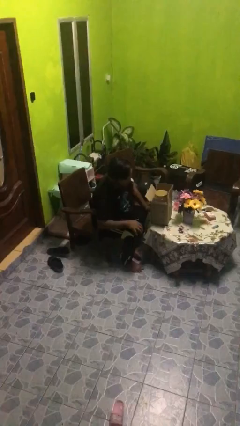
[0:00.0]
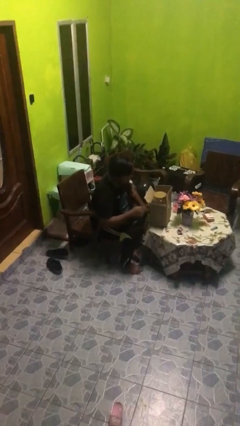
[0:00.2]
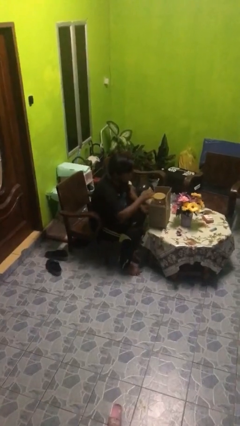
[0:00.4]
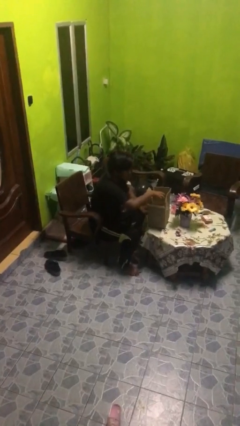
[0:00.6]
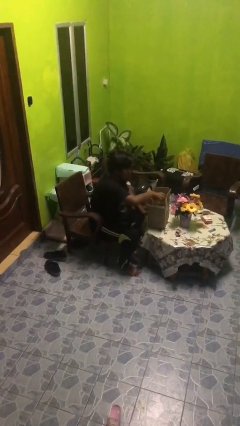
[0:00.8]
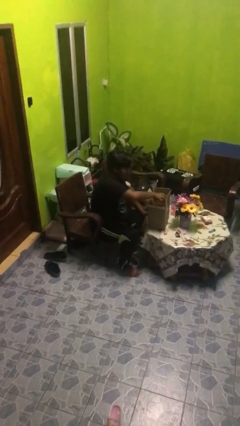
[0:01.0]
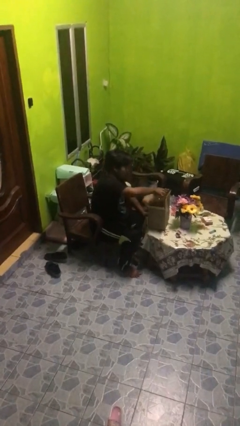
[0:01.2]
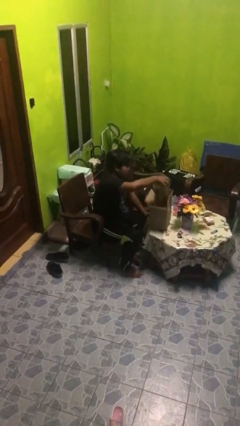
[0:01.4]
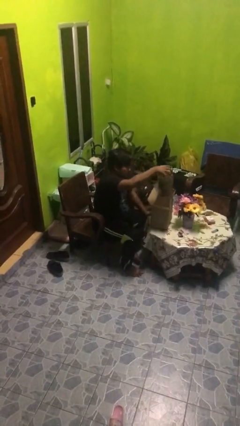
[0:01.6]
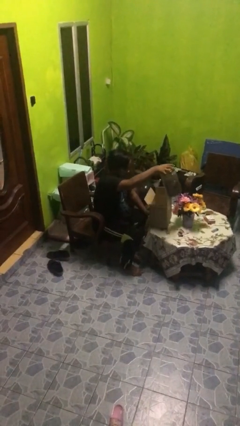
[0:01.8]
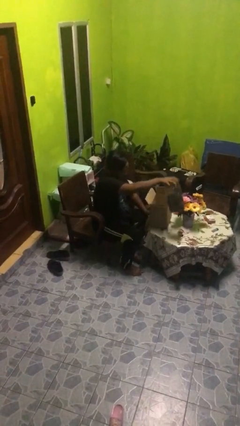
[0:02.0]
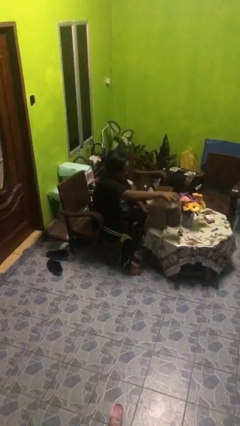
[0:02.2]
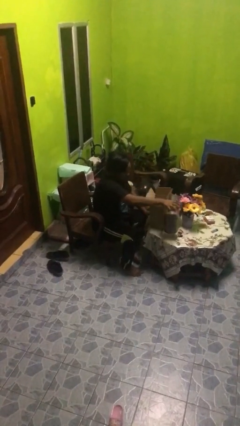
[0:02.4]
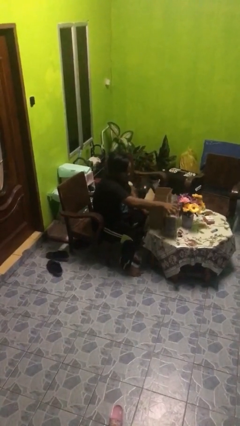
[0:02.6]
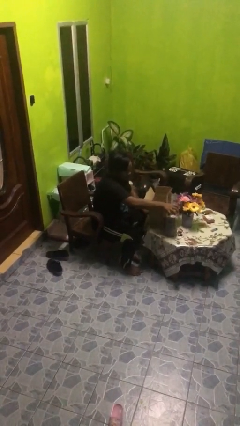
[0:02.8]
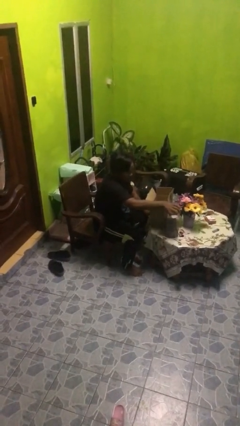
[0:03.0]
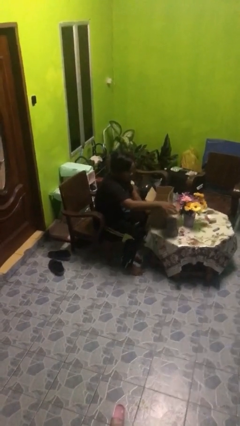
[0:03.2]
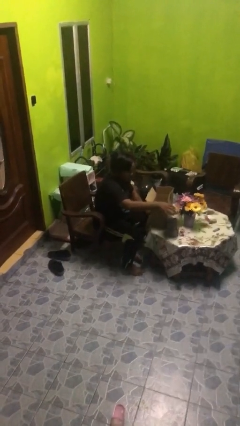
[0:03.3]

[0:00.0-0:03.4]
person takes object from box

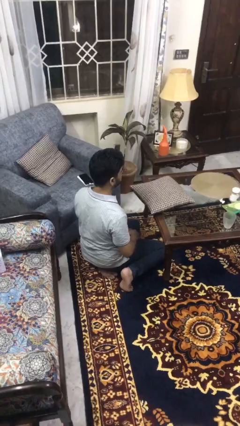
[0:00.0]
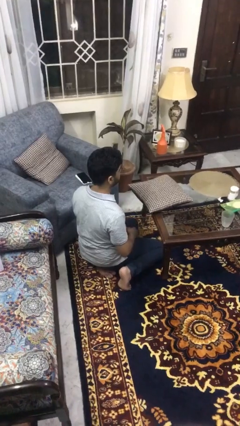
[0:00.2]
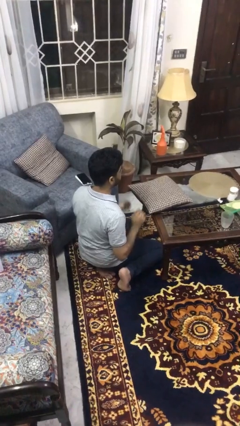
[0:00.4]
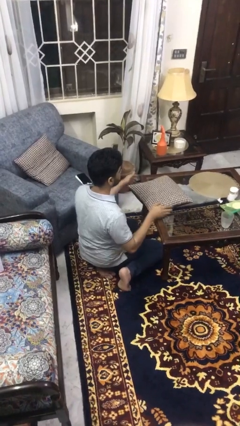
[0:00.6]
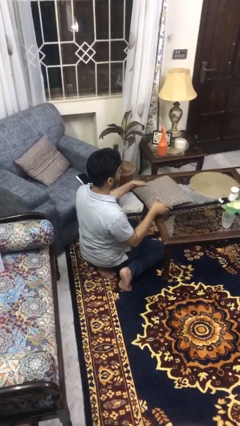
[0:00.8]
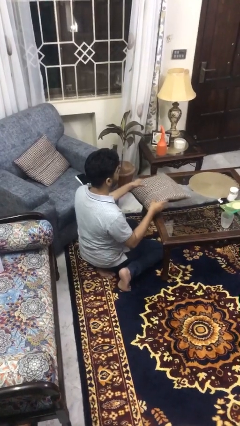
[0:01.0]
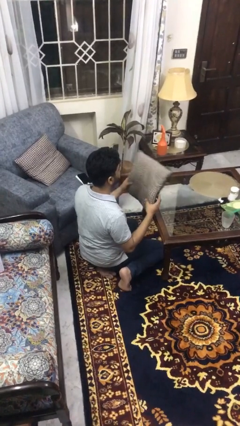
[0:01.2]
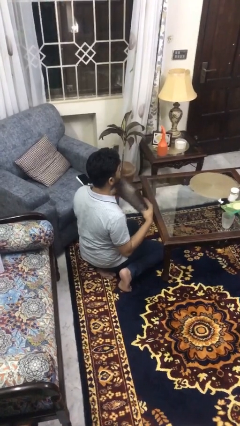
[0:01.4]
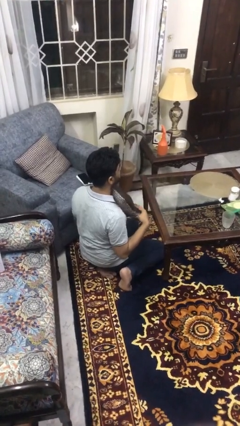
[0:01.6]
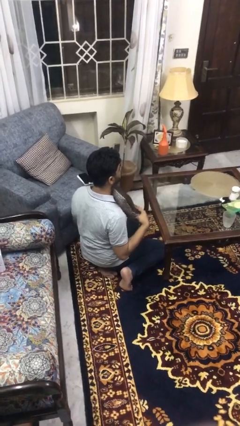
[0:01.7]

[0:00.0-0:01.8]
person picks up object from table

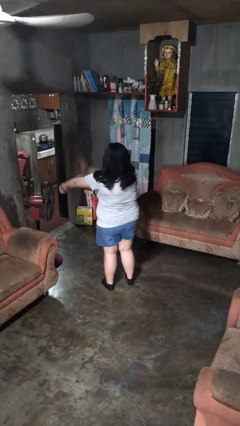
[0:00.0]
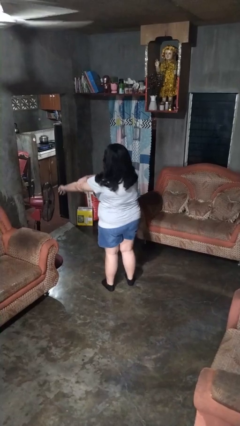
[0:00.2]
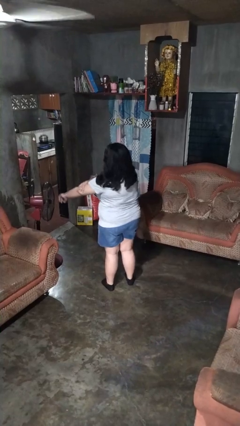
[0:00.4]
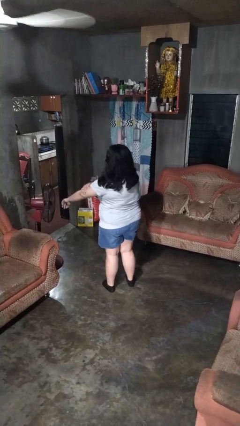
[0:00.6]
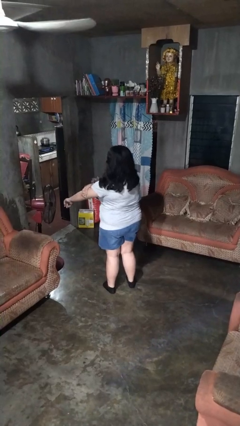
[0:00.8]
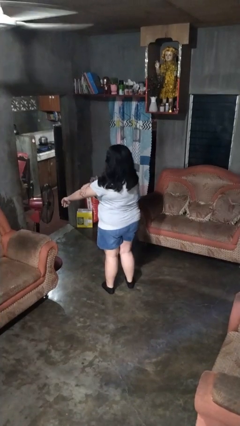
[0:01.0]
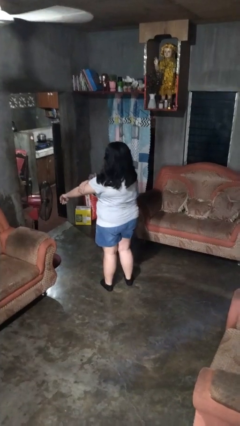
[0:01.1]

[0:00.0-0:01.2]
person swats bug

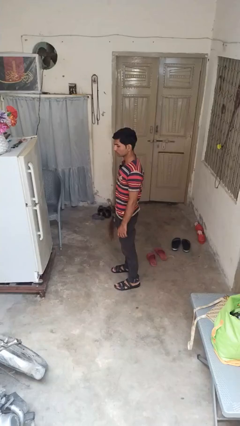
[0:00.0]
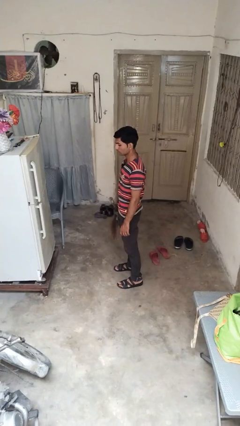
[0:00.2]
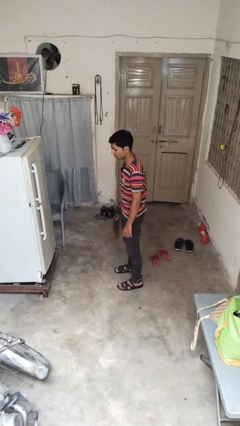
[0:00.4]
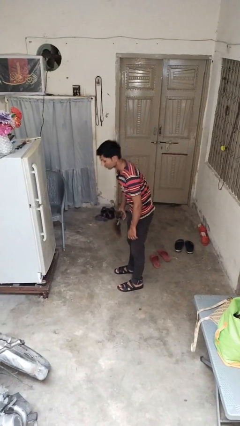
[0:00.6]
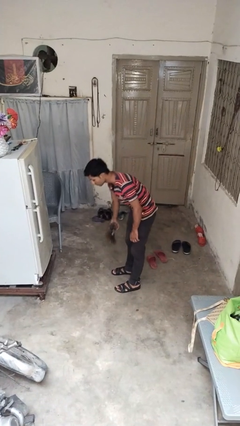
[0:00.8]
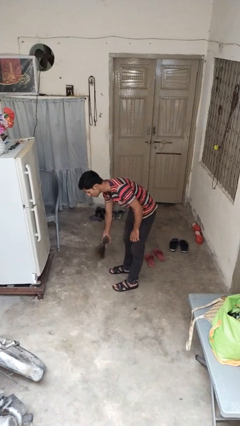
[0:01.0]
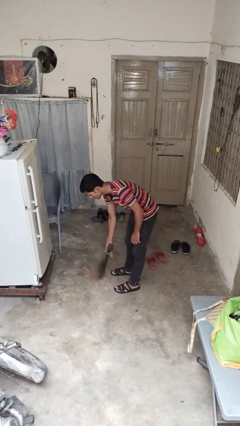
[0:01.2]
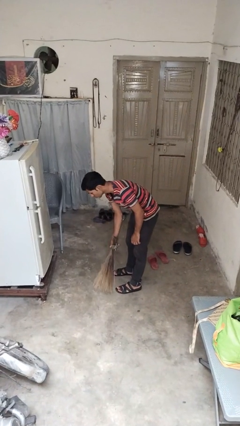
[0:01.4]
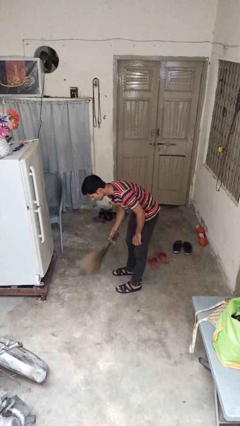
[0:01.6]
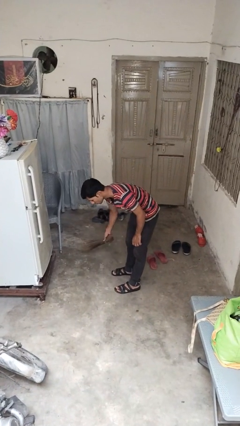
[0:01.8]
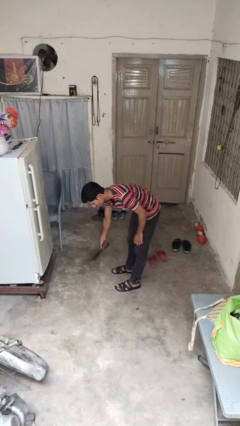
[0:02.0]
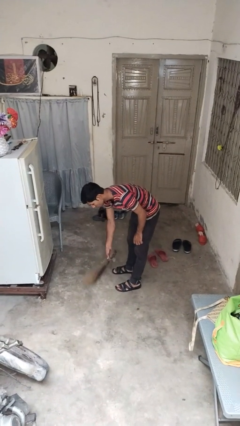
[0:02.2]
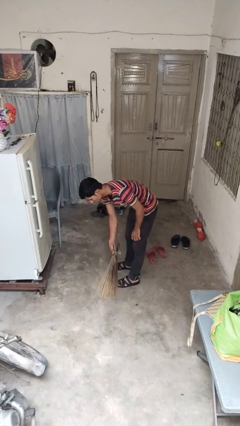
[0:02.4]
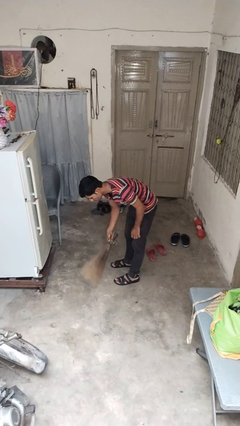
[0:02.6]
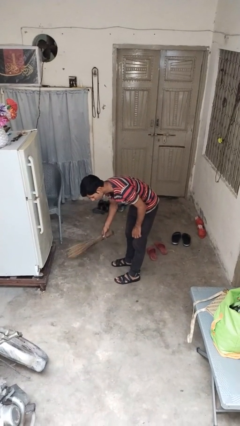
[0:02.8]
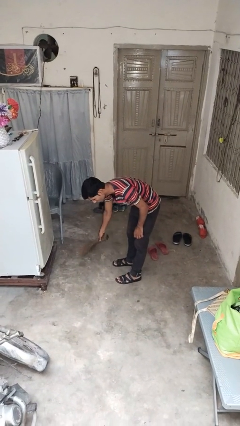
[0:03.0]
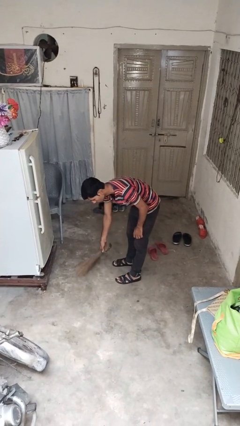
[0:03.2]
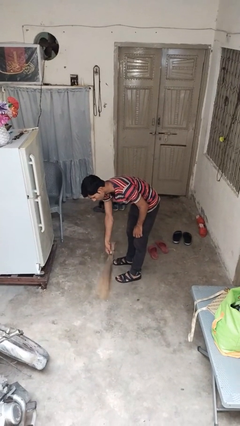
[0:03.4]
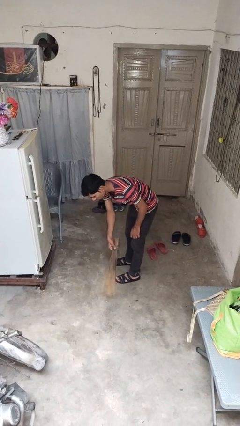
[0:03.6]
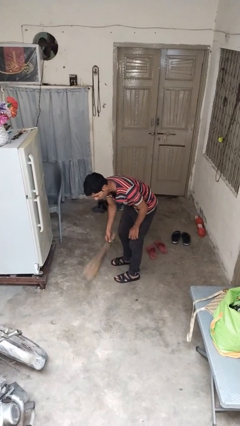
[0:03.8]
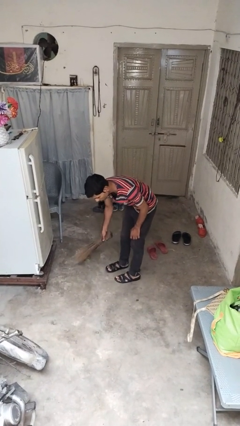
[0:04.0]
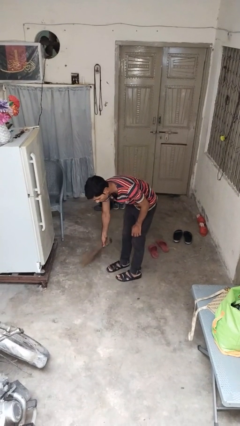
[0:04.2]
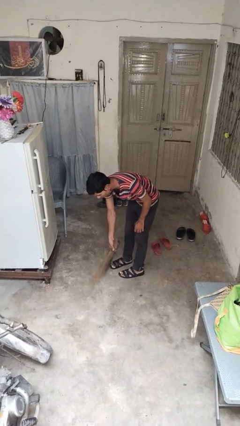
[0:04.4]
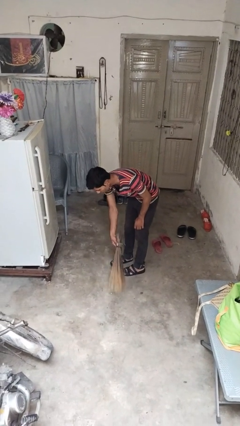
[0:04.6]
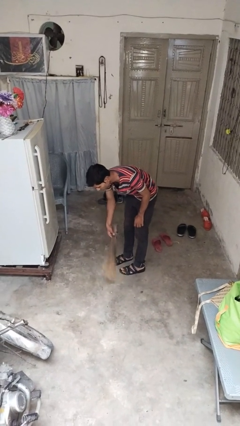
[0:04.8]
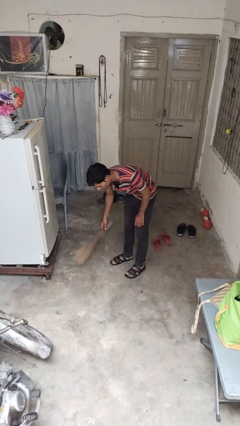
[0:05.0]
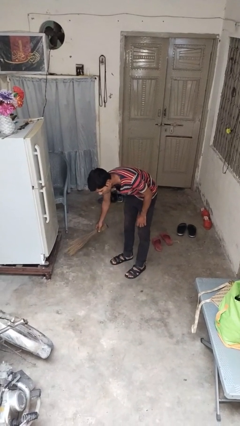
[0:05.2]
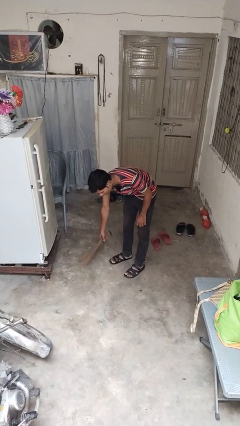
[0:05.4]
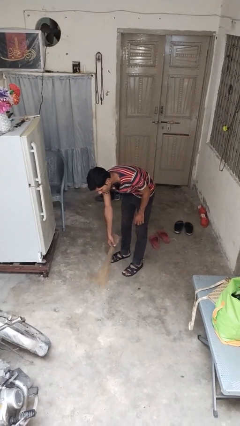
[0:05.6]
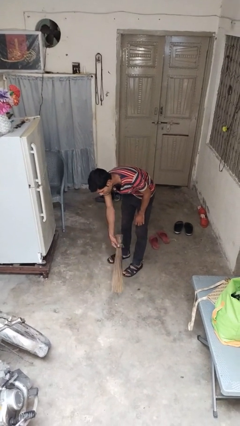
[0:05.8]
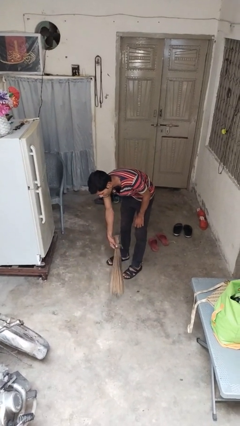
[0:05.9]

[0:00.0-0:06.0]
person sweeps floor

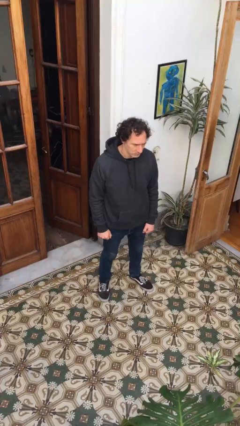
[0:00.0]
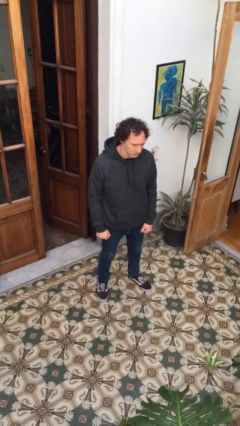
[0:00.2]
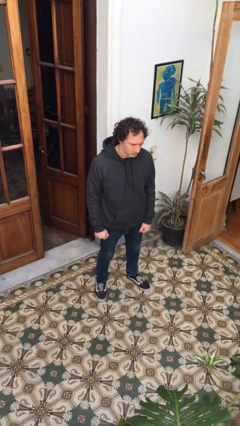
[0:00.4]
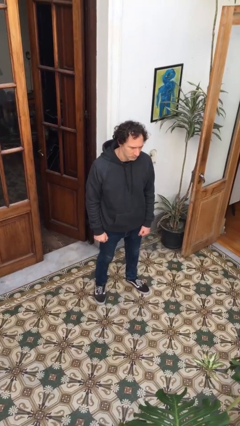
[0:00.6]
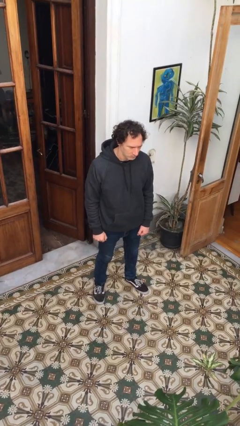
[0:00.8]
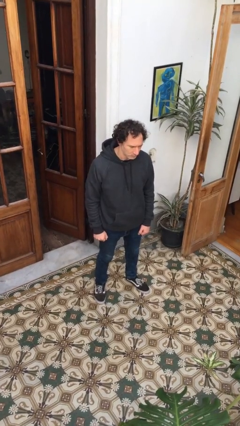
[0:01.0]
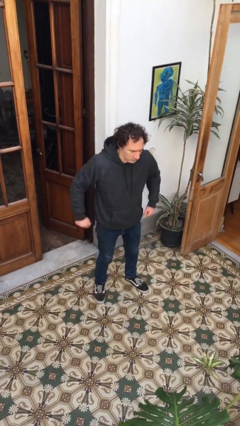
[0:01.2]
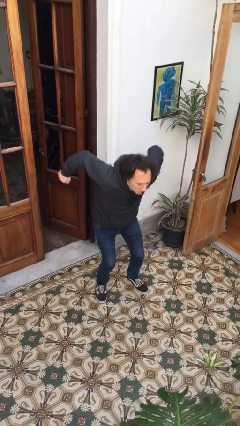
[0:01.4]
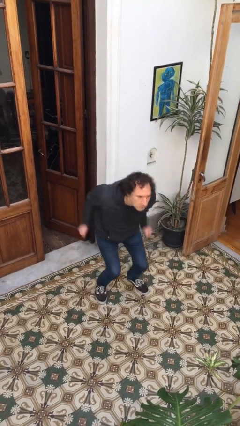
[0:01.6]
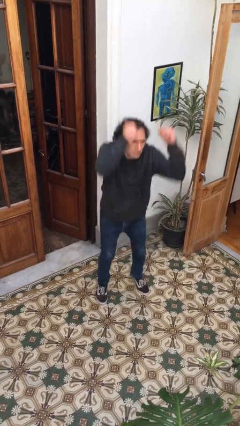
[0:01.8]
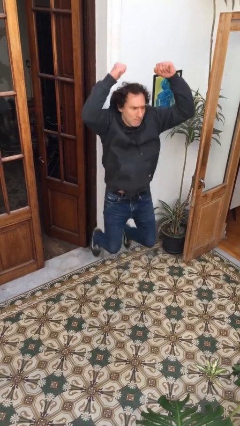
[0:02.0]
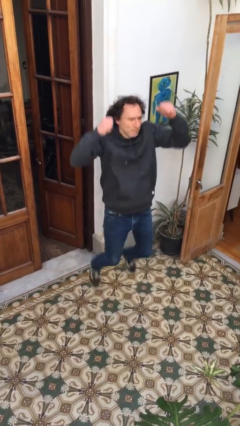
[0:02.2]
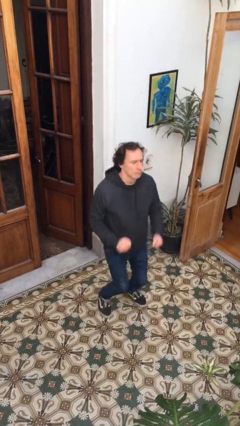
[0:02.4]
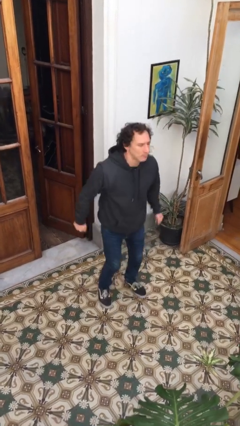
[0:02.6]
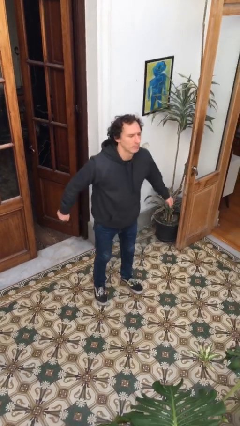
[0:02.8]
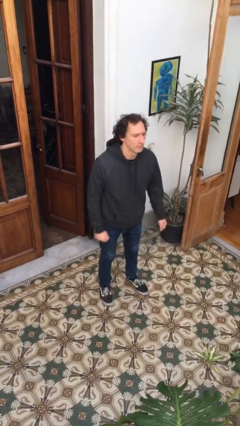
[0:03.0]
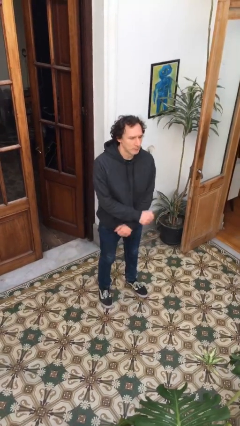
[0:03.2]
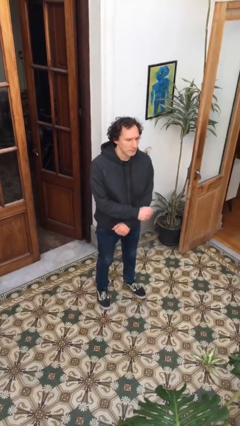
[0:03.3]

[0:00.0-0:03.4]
person jumps

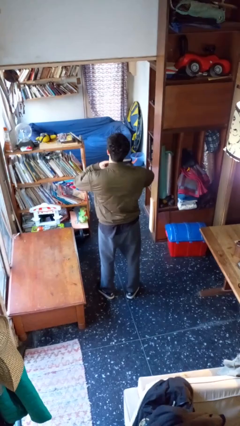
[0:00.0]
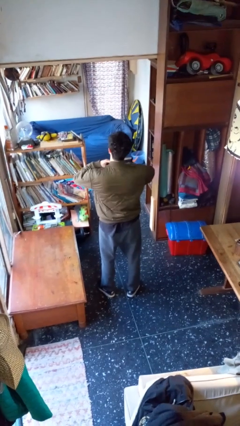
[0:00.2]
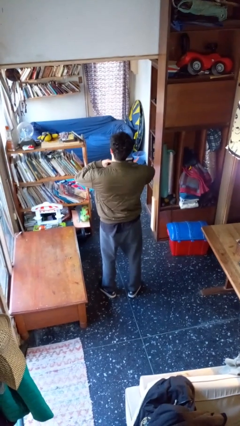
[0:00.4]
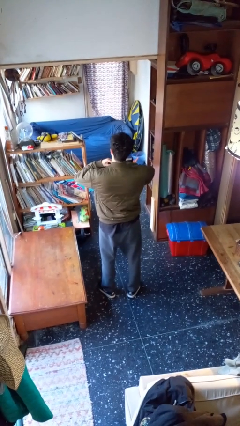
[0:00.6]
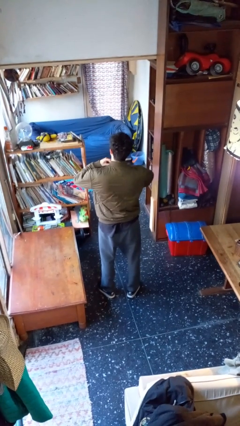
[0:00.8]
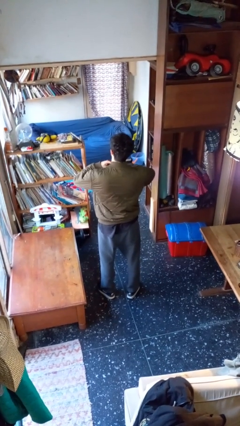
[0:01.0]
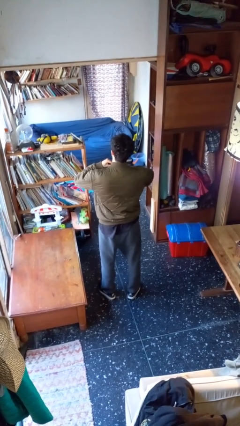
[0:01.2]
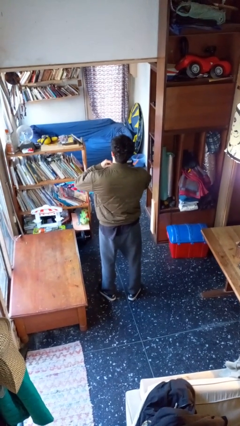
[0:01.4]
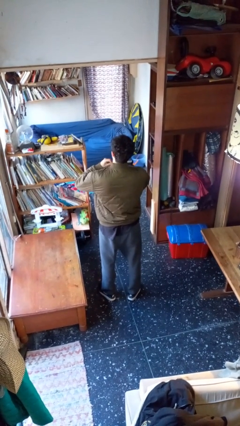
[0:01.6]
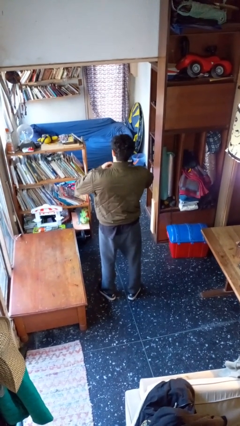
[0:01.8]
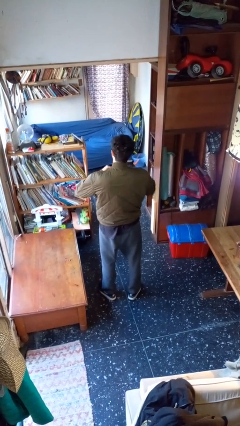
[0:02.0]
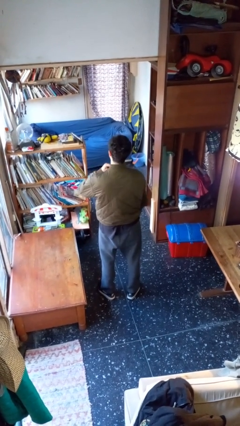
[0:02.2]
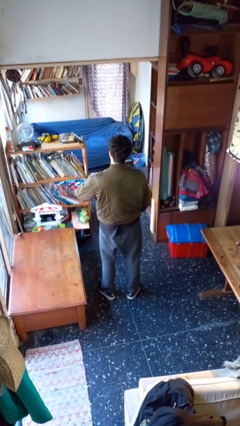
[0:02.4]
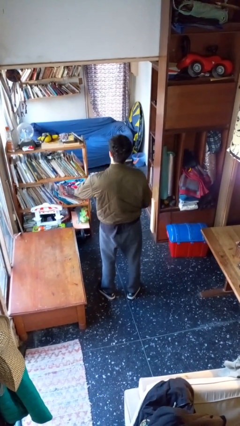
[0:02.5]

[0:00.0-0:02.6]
person unzips jacket
